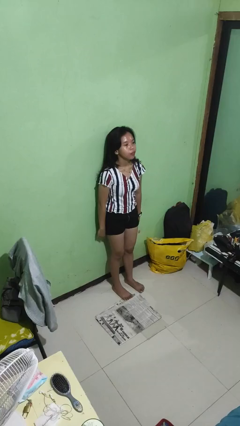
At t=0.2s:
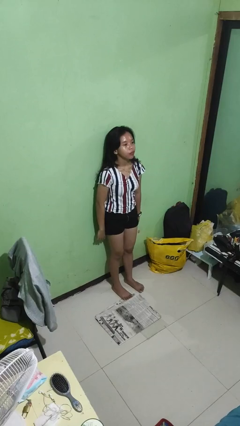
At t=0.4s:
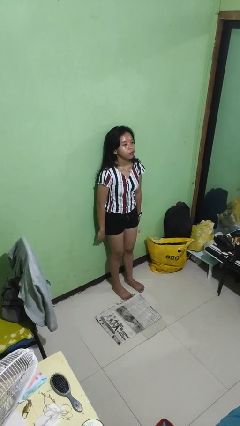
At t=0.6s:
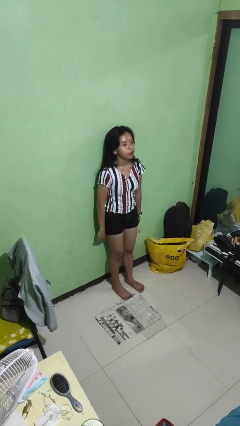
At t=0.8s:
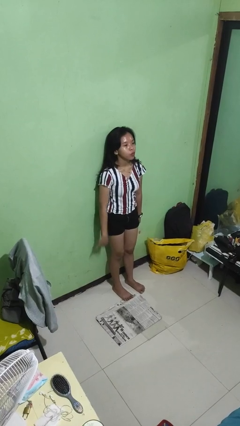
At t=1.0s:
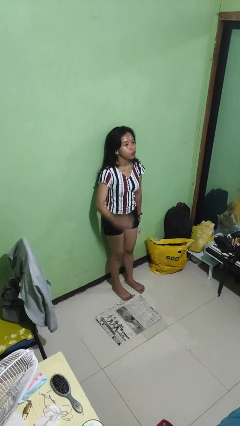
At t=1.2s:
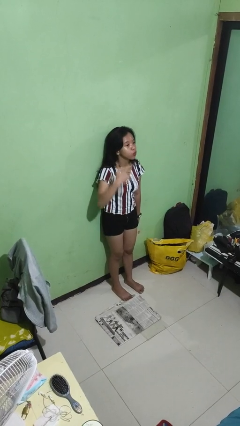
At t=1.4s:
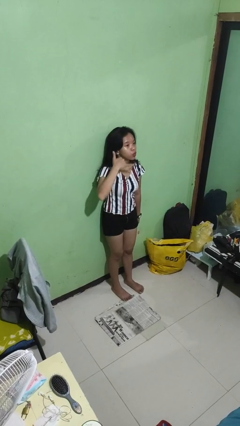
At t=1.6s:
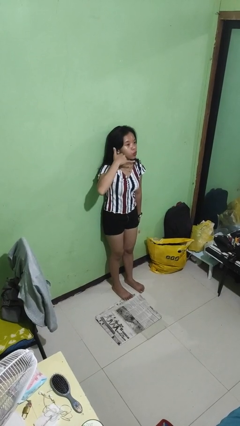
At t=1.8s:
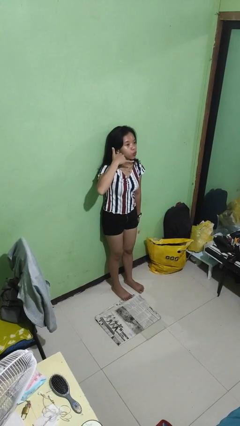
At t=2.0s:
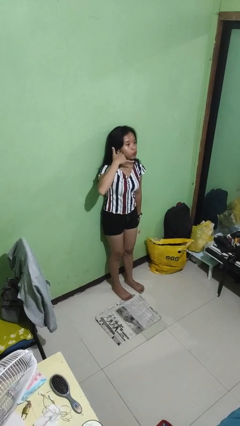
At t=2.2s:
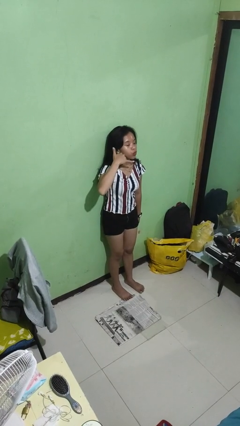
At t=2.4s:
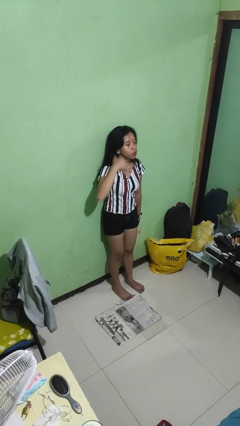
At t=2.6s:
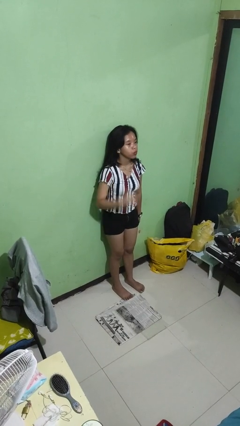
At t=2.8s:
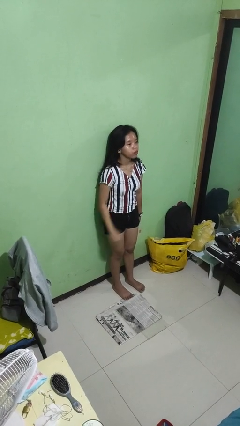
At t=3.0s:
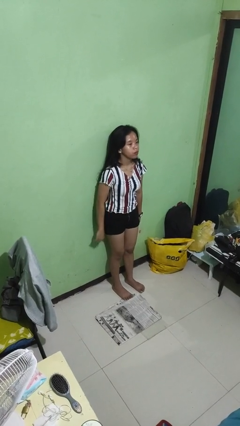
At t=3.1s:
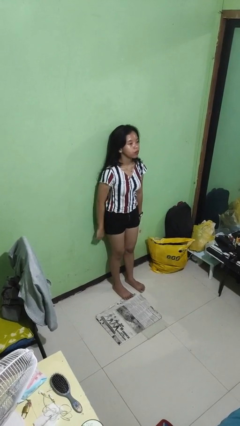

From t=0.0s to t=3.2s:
person picks up object from floor

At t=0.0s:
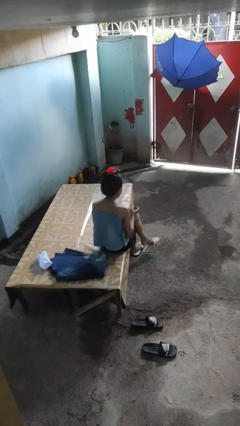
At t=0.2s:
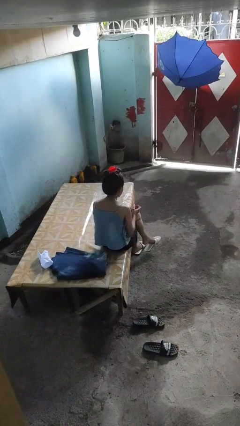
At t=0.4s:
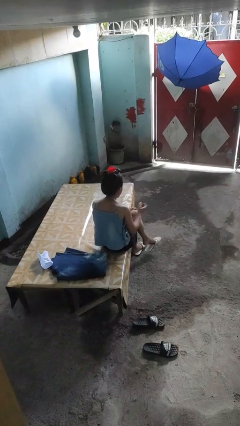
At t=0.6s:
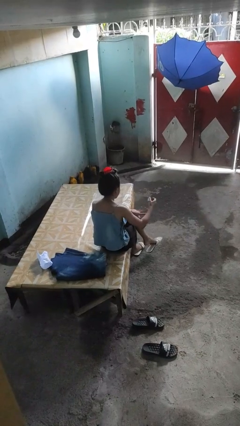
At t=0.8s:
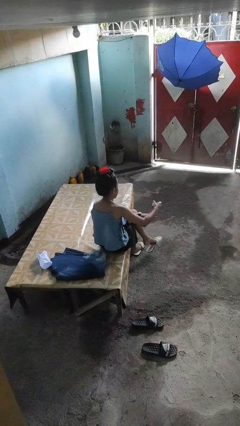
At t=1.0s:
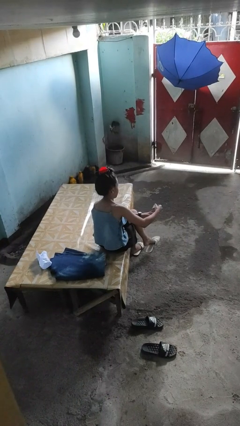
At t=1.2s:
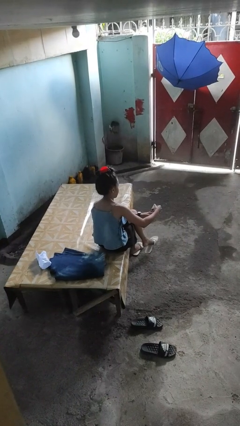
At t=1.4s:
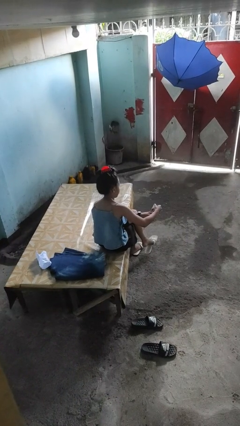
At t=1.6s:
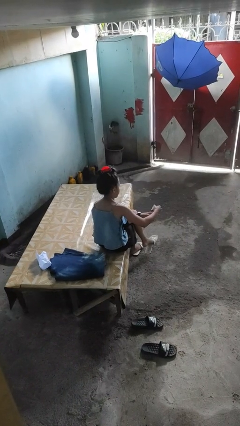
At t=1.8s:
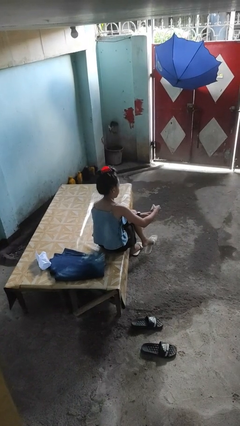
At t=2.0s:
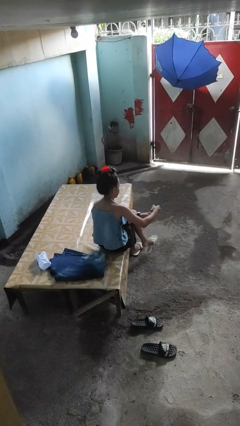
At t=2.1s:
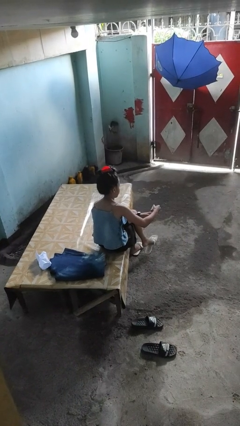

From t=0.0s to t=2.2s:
person clips fingernails

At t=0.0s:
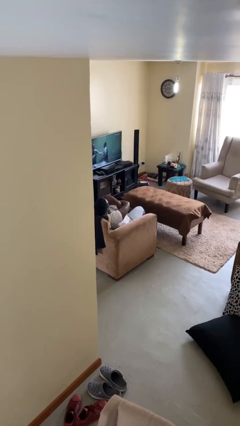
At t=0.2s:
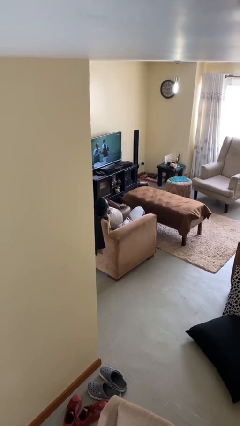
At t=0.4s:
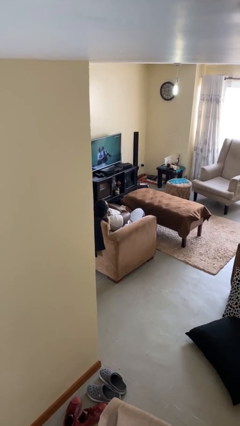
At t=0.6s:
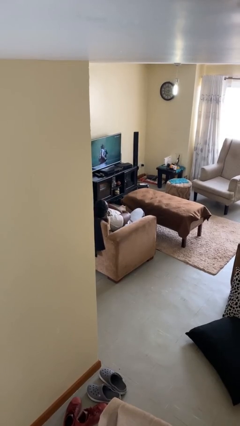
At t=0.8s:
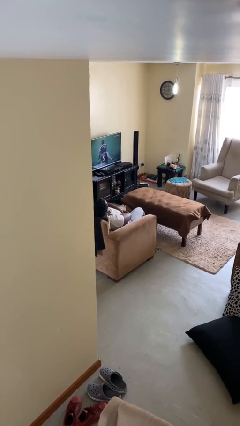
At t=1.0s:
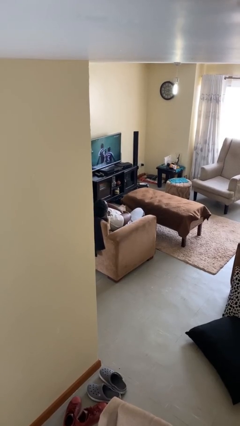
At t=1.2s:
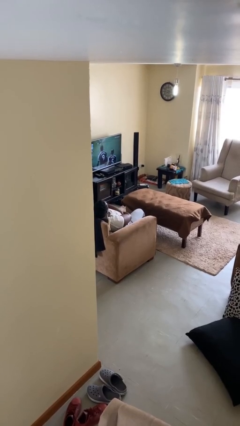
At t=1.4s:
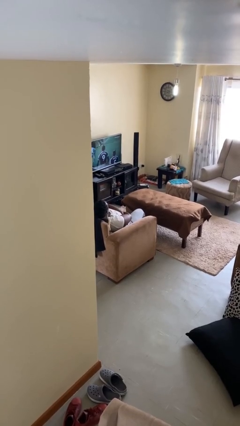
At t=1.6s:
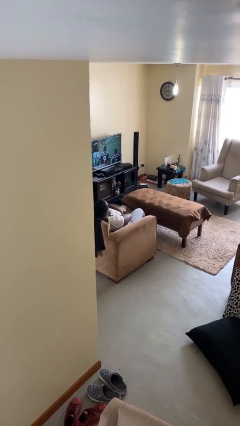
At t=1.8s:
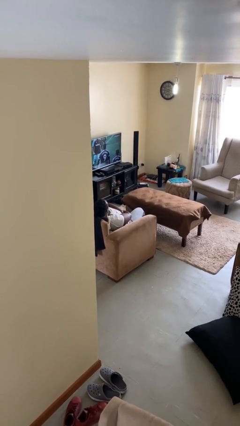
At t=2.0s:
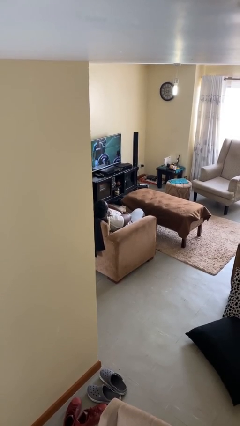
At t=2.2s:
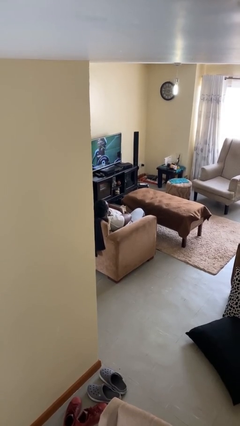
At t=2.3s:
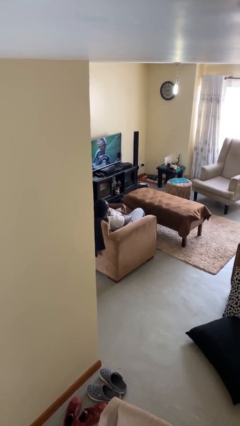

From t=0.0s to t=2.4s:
person crosses arms

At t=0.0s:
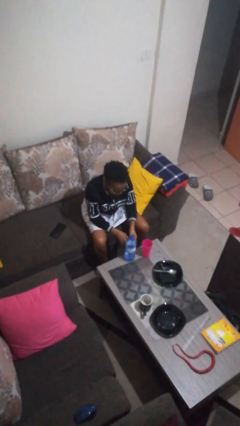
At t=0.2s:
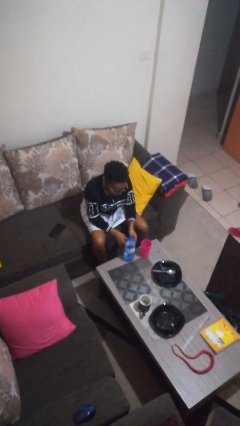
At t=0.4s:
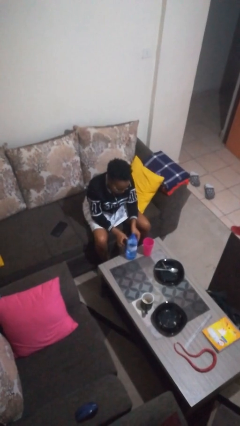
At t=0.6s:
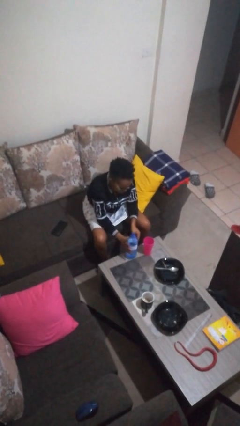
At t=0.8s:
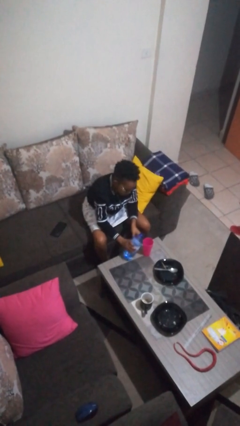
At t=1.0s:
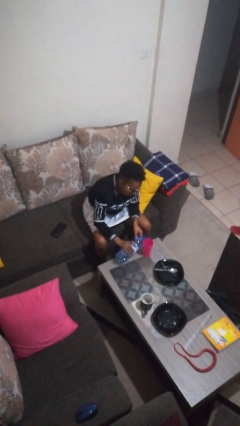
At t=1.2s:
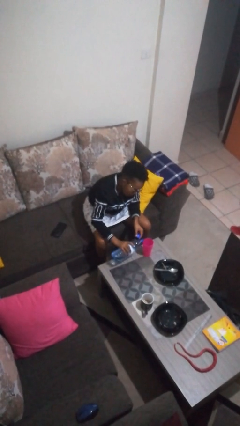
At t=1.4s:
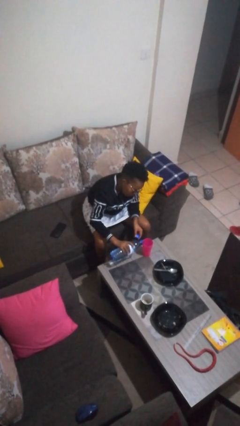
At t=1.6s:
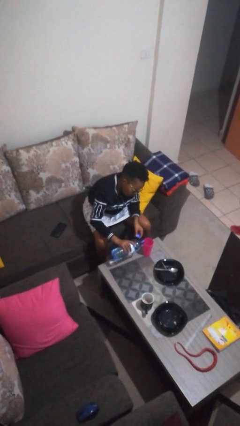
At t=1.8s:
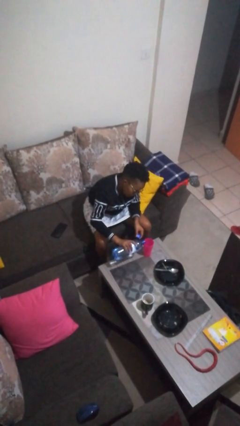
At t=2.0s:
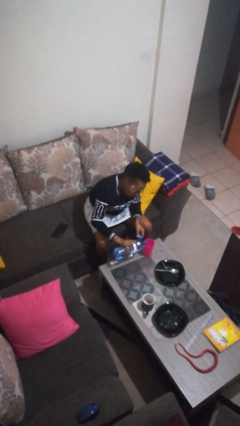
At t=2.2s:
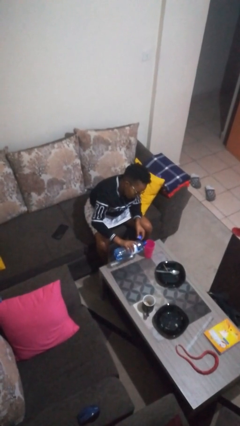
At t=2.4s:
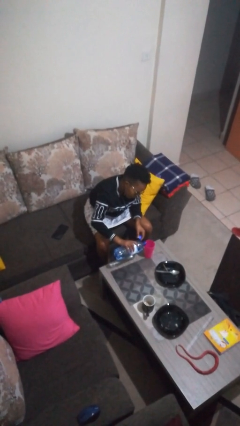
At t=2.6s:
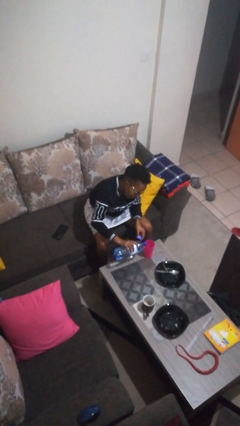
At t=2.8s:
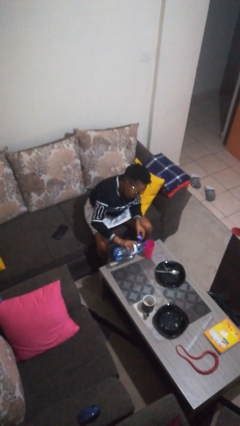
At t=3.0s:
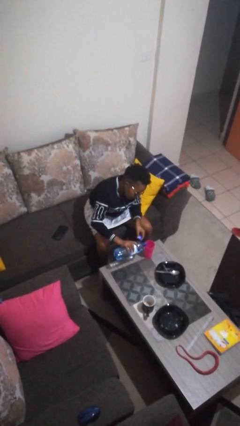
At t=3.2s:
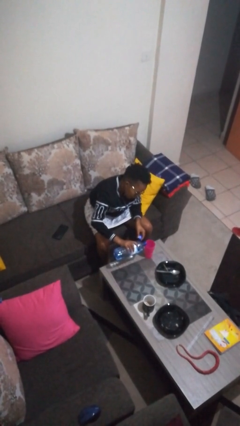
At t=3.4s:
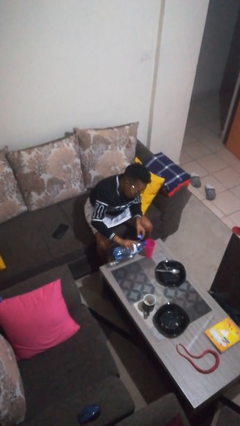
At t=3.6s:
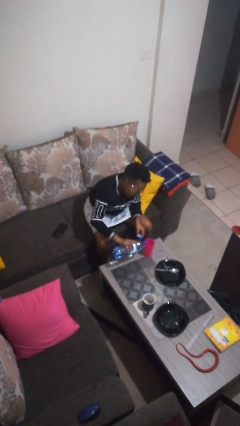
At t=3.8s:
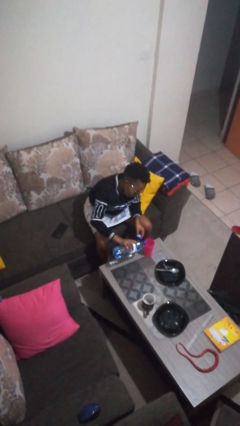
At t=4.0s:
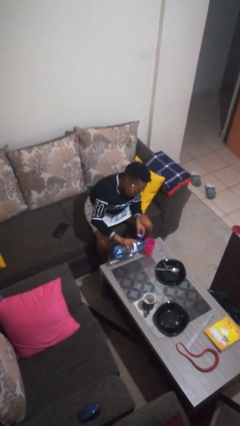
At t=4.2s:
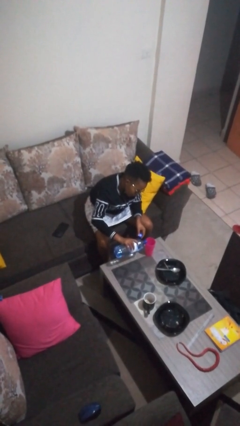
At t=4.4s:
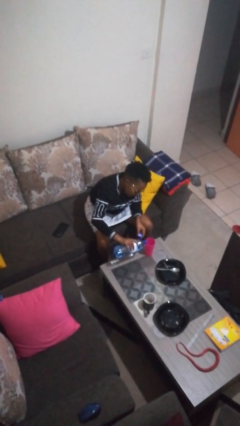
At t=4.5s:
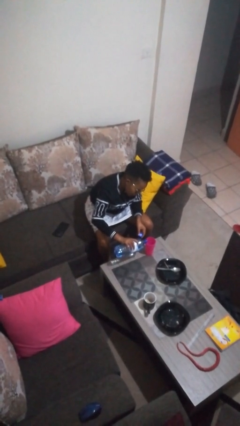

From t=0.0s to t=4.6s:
person pours liquid into cup

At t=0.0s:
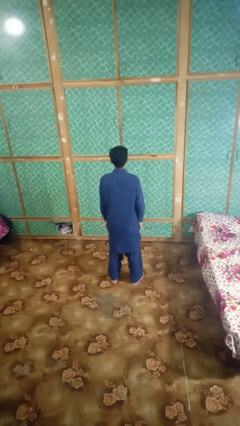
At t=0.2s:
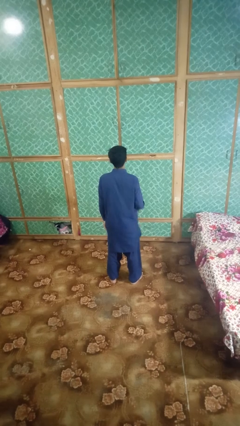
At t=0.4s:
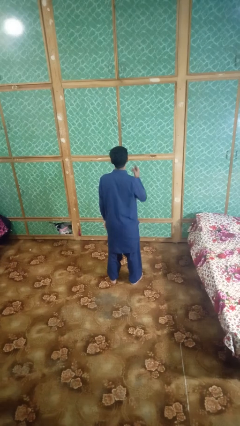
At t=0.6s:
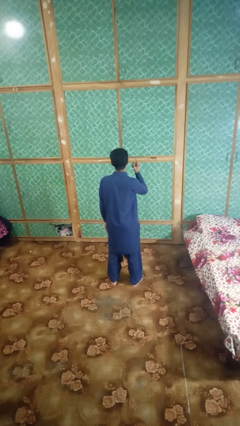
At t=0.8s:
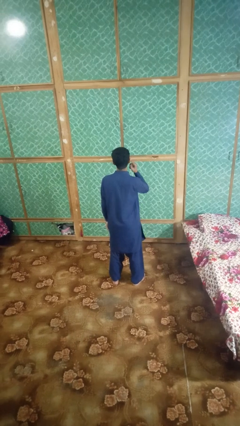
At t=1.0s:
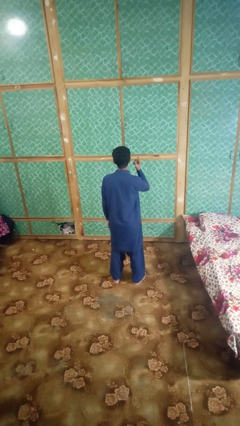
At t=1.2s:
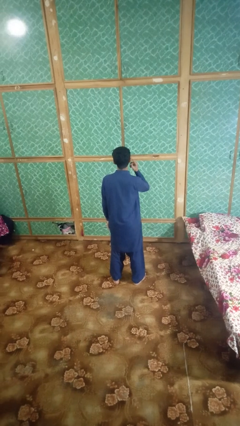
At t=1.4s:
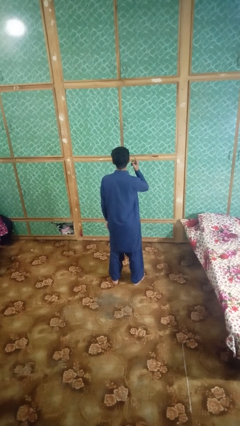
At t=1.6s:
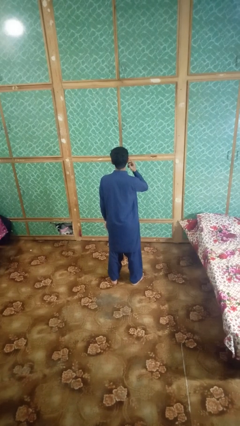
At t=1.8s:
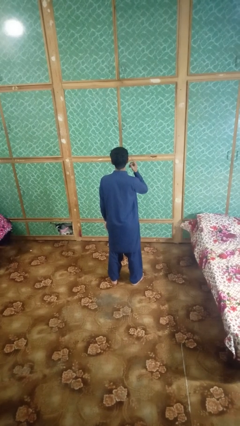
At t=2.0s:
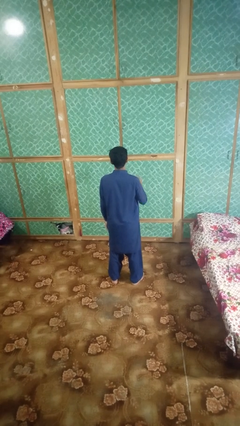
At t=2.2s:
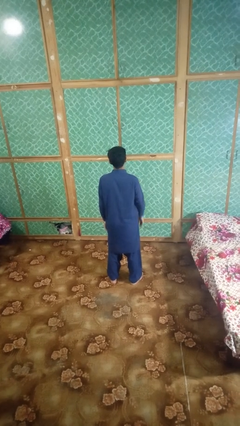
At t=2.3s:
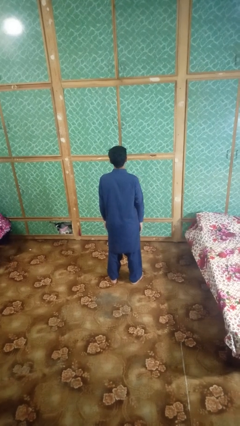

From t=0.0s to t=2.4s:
person gestures listen closely

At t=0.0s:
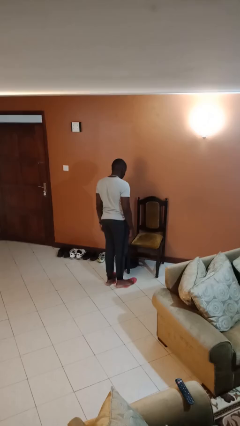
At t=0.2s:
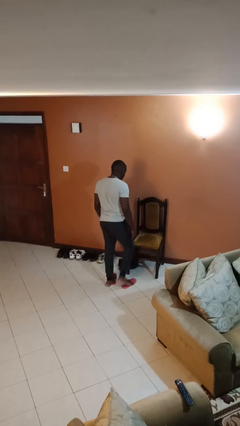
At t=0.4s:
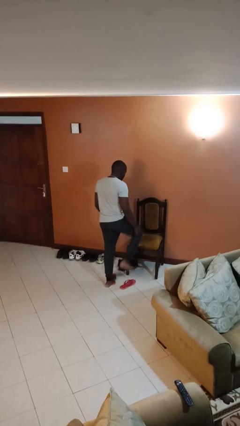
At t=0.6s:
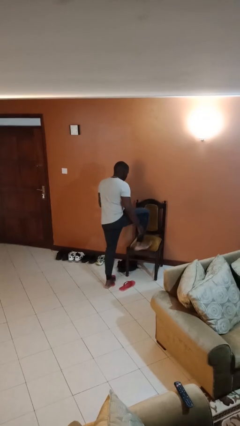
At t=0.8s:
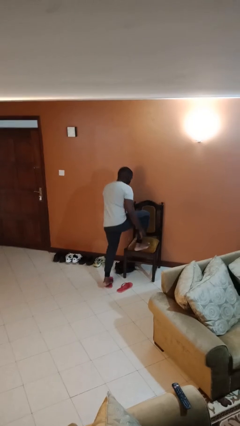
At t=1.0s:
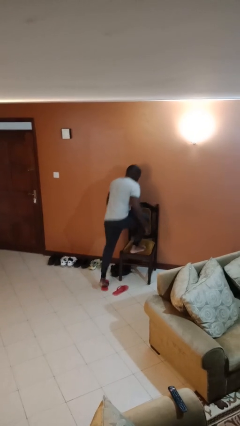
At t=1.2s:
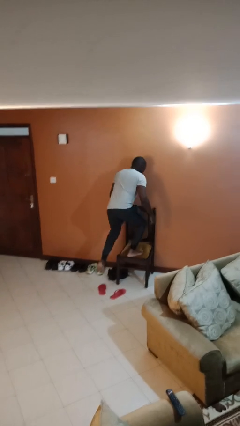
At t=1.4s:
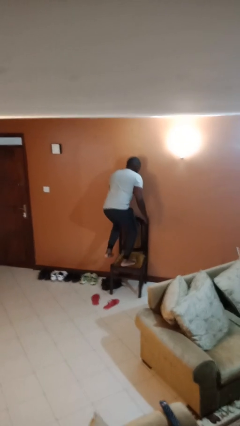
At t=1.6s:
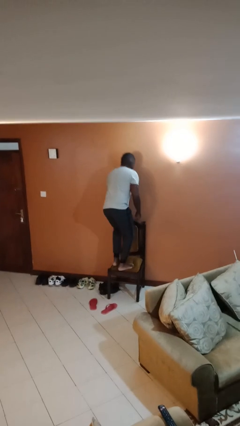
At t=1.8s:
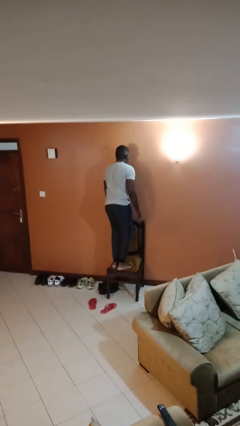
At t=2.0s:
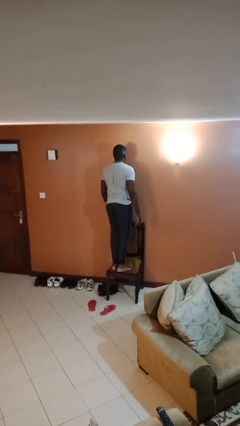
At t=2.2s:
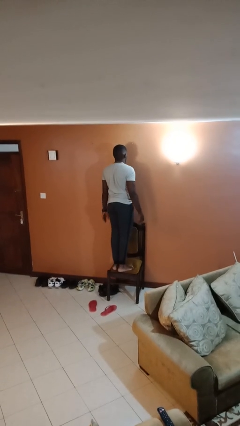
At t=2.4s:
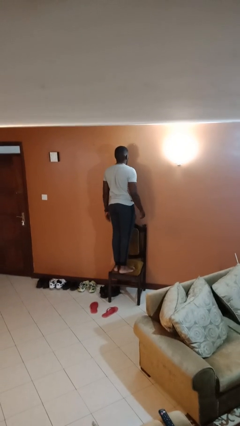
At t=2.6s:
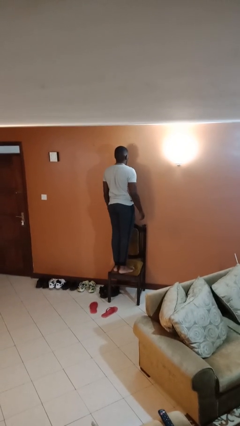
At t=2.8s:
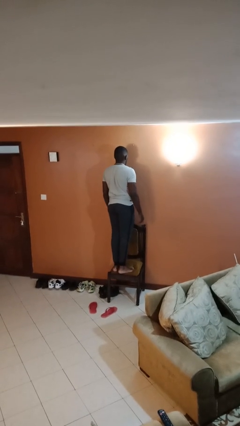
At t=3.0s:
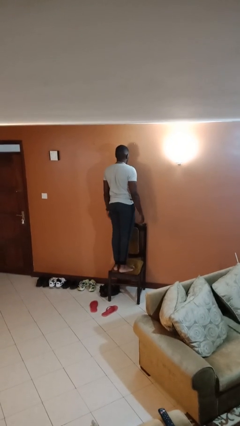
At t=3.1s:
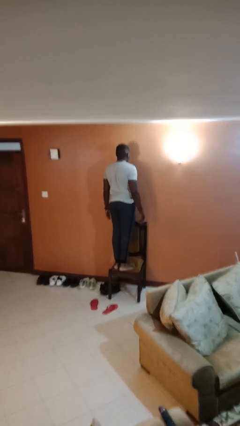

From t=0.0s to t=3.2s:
person climbs on chair
